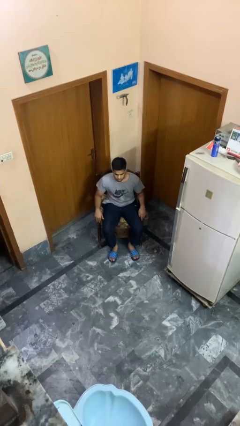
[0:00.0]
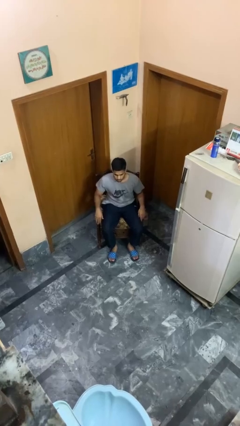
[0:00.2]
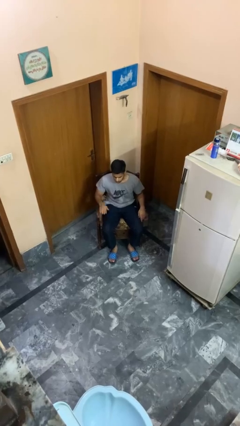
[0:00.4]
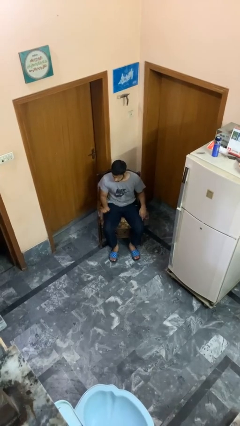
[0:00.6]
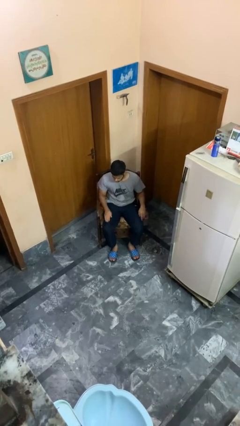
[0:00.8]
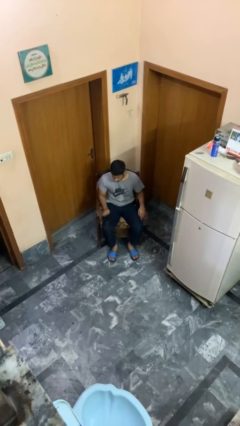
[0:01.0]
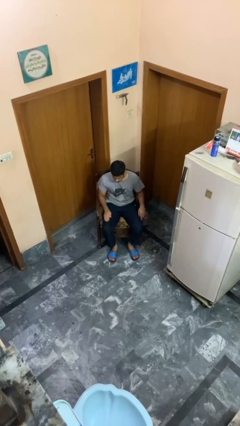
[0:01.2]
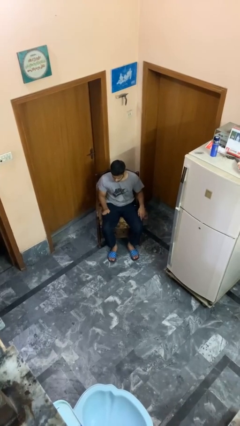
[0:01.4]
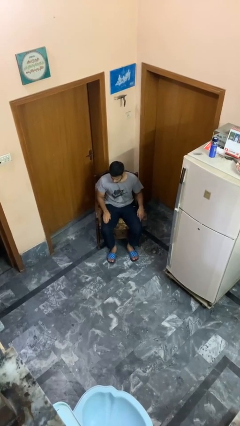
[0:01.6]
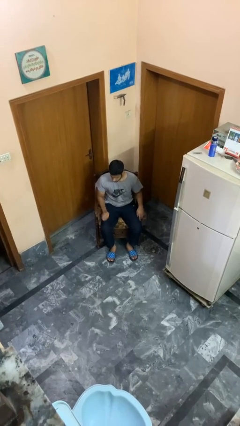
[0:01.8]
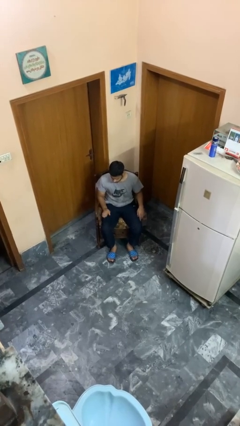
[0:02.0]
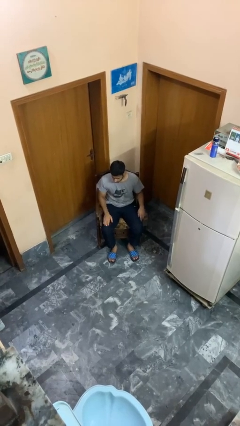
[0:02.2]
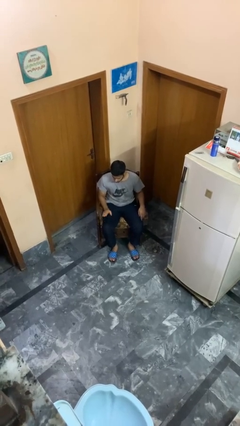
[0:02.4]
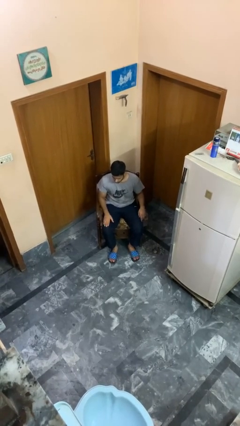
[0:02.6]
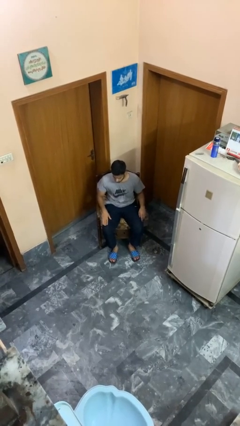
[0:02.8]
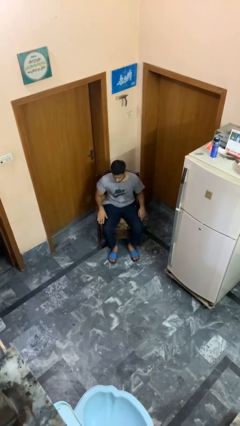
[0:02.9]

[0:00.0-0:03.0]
person slaps hands on thighs

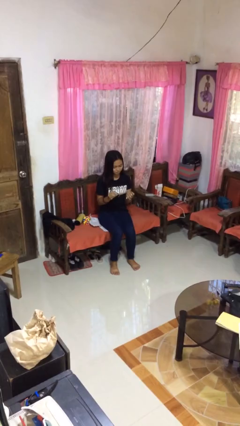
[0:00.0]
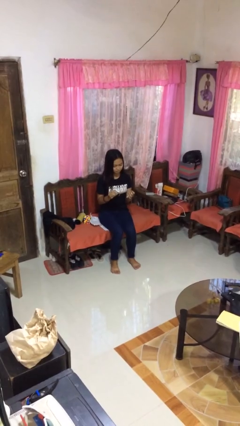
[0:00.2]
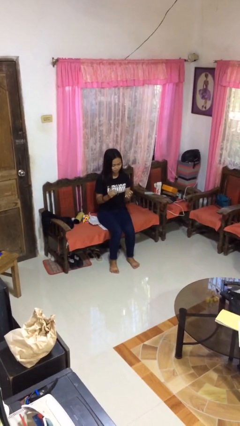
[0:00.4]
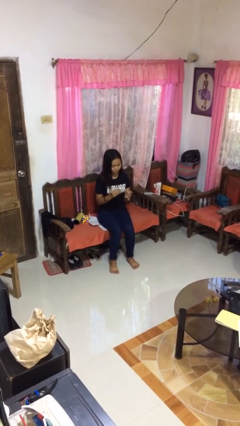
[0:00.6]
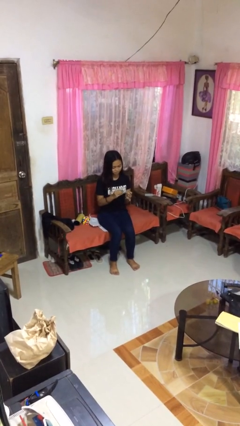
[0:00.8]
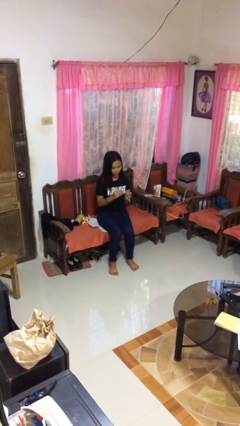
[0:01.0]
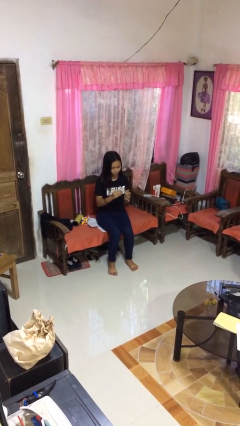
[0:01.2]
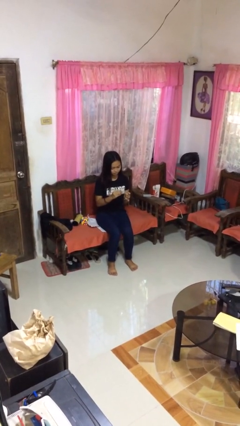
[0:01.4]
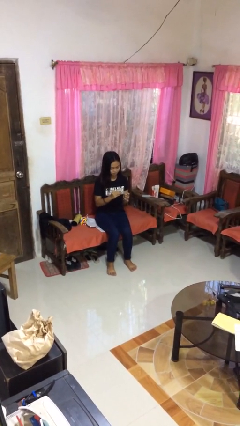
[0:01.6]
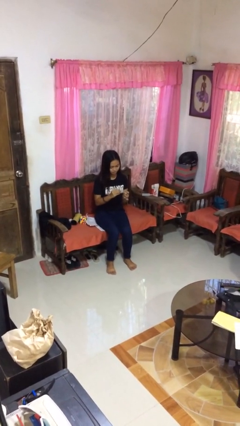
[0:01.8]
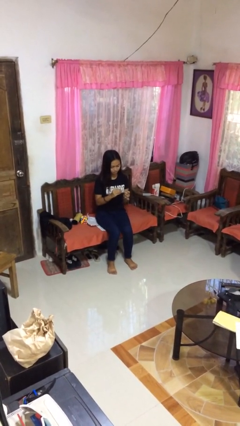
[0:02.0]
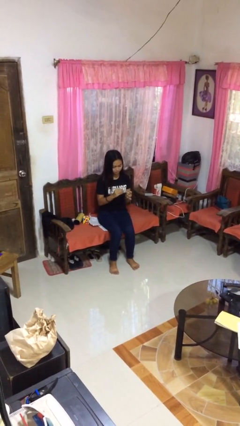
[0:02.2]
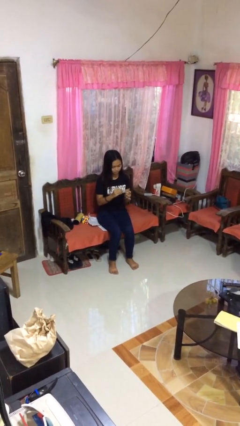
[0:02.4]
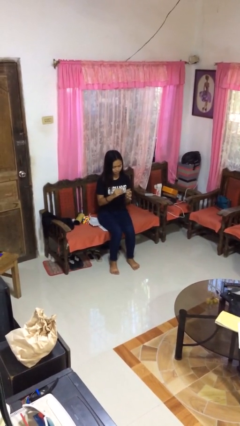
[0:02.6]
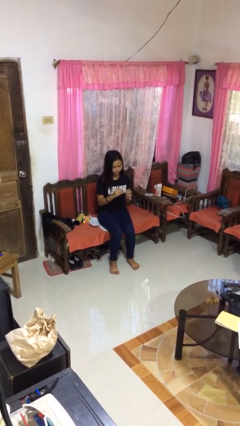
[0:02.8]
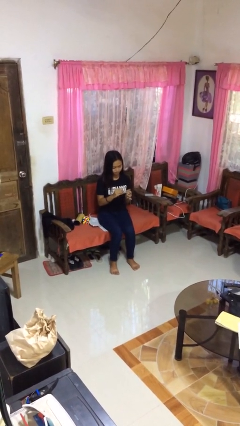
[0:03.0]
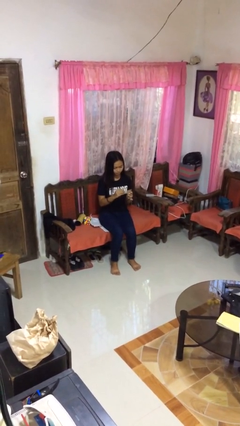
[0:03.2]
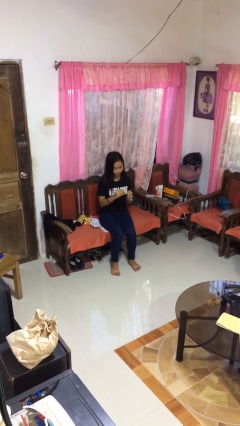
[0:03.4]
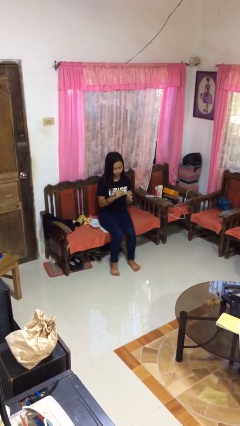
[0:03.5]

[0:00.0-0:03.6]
person clips fingernails

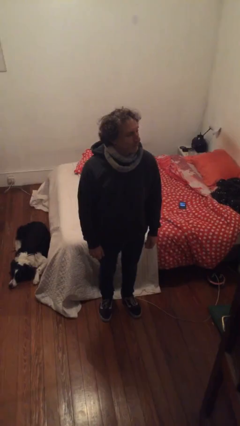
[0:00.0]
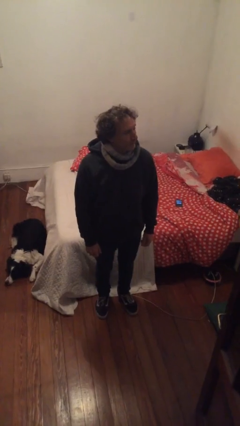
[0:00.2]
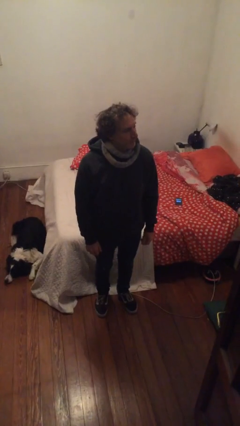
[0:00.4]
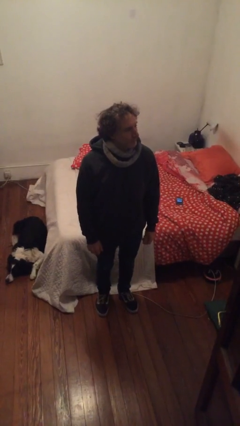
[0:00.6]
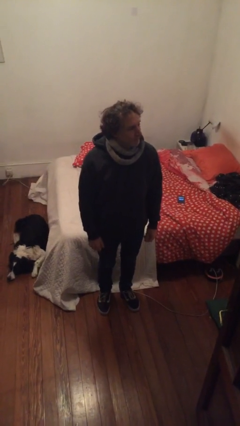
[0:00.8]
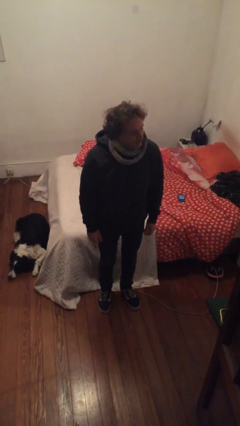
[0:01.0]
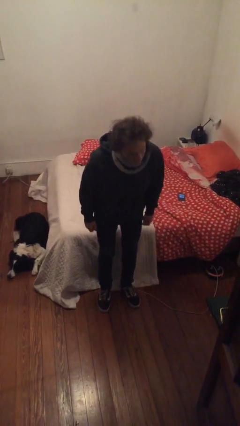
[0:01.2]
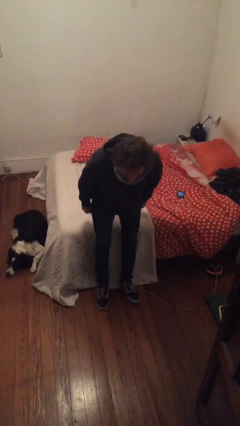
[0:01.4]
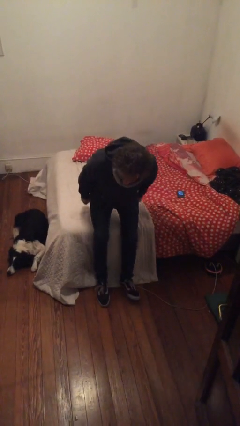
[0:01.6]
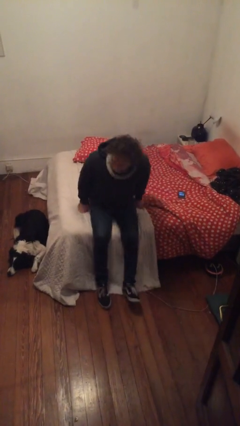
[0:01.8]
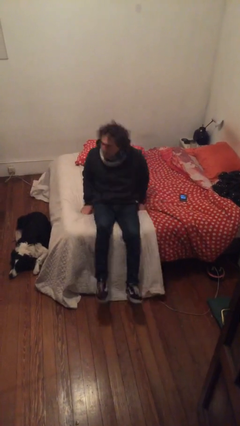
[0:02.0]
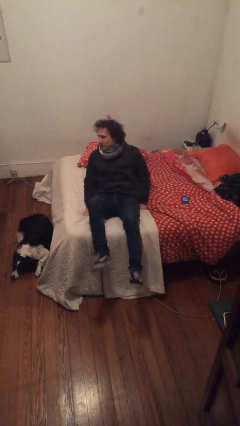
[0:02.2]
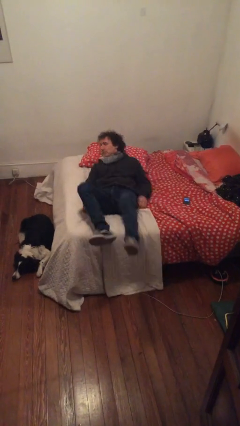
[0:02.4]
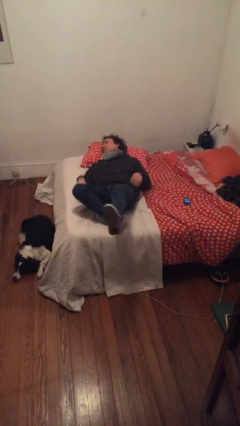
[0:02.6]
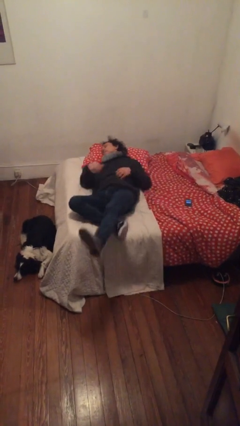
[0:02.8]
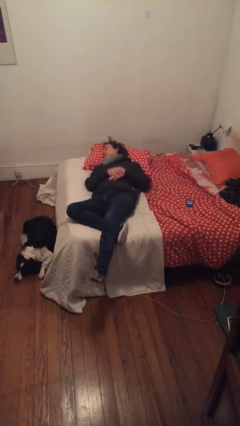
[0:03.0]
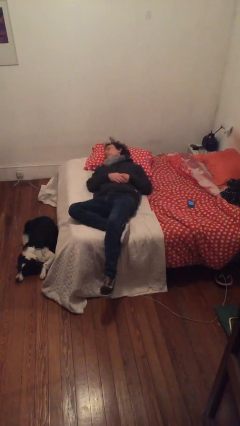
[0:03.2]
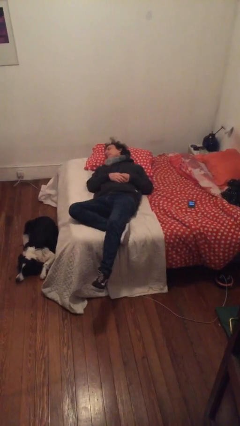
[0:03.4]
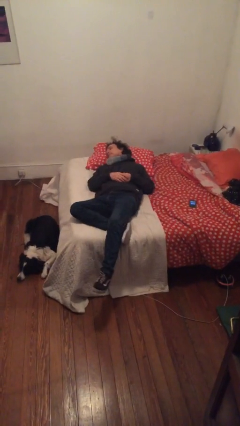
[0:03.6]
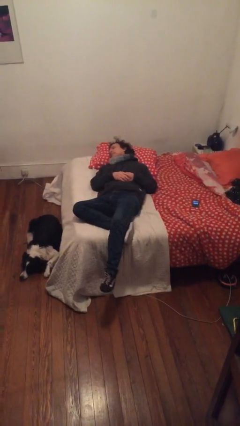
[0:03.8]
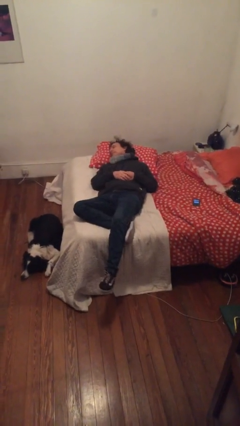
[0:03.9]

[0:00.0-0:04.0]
person lies down on bed

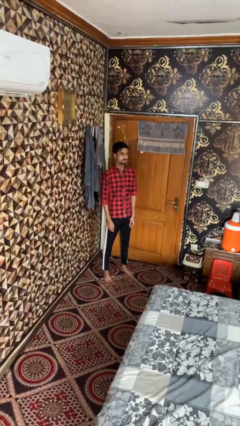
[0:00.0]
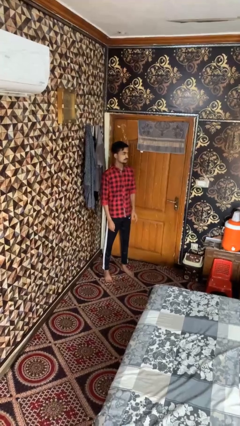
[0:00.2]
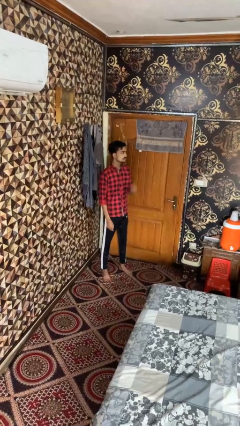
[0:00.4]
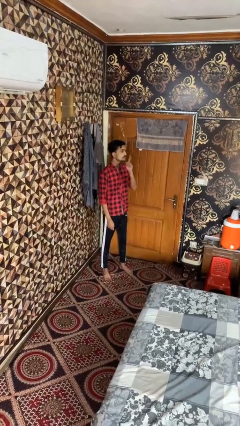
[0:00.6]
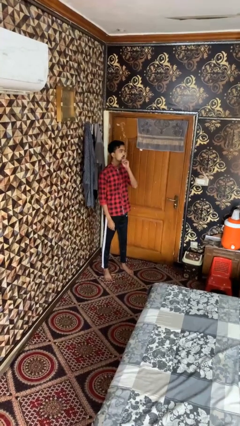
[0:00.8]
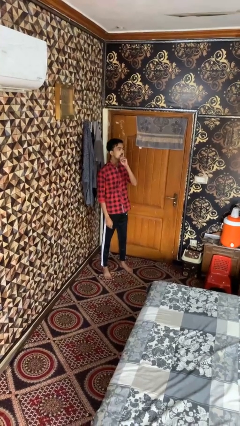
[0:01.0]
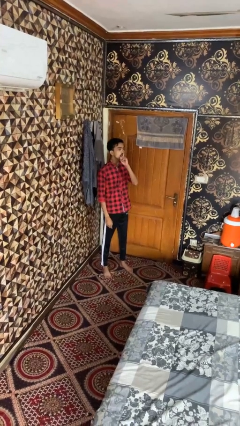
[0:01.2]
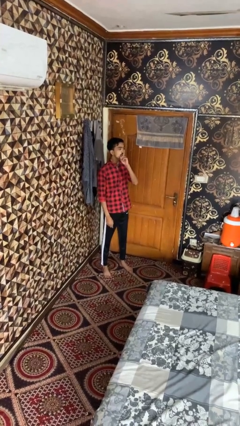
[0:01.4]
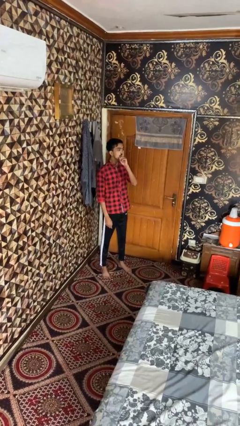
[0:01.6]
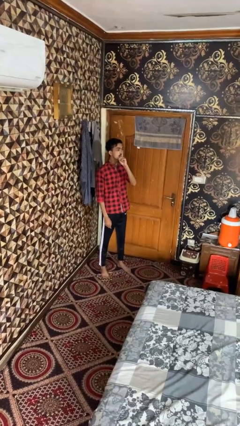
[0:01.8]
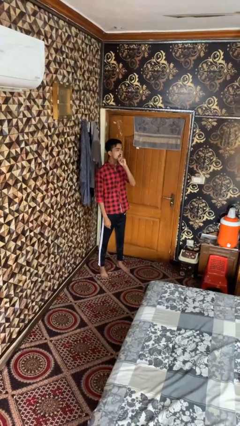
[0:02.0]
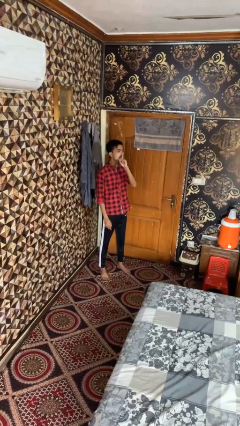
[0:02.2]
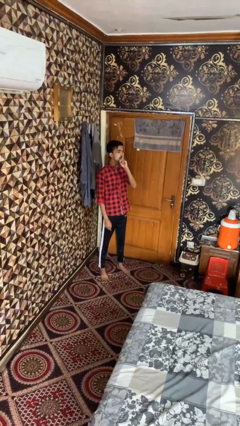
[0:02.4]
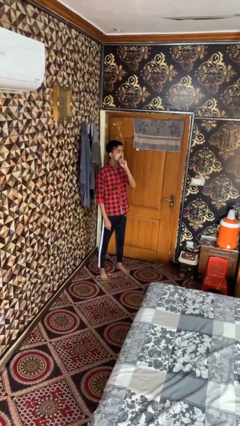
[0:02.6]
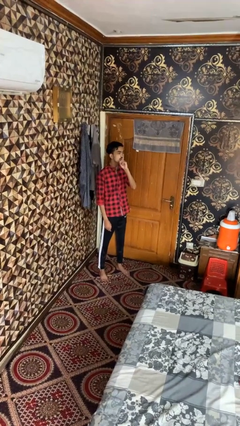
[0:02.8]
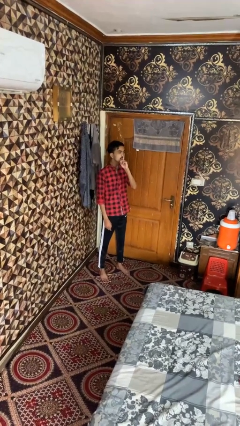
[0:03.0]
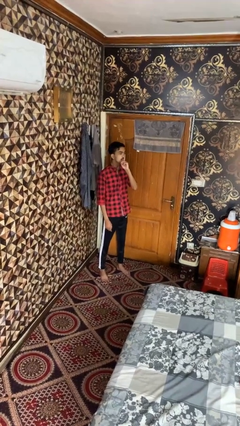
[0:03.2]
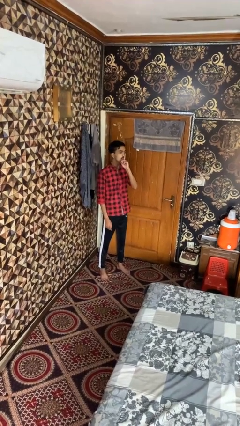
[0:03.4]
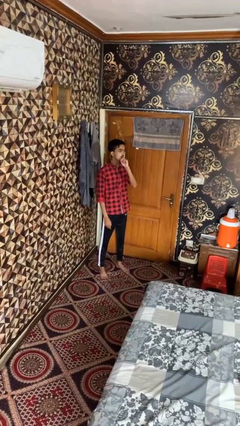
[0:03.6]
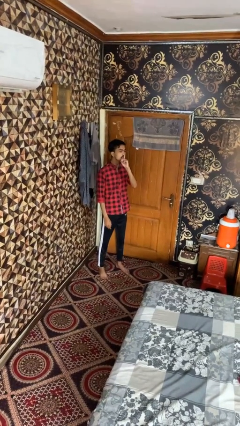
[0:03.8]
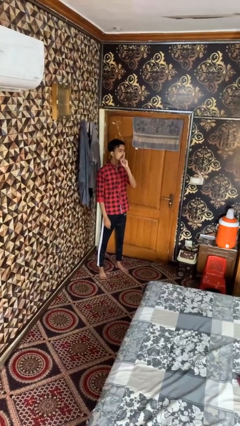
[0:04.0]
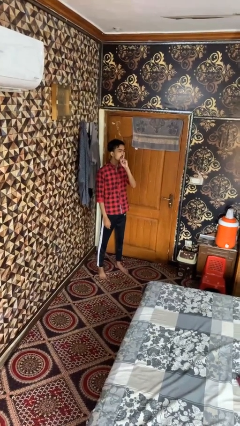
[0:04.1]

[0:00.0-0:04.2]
person gestures be quiet

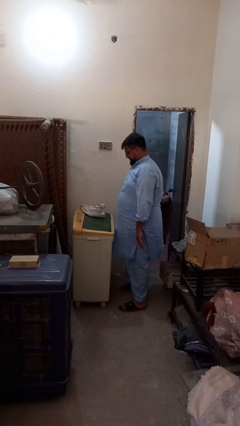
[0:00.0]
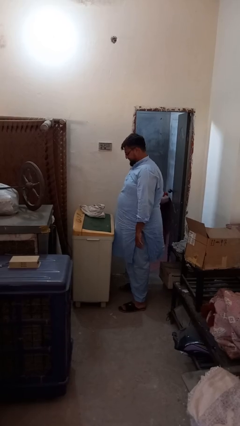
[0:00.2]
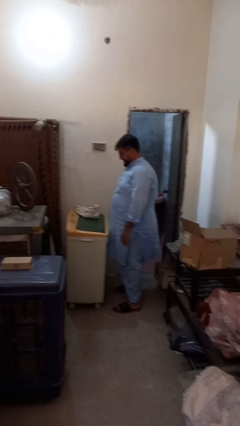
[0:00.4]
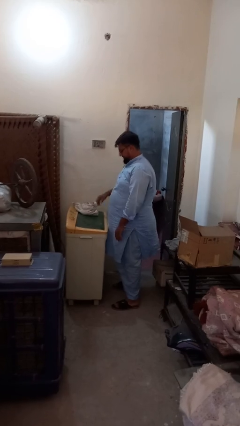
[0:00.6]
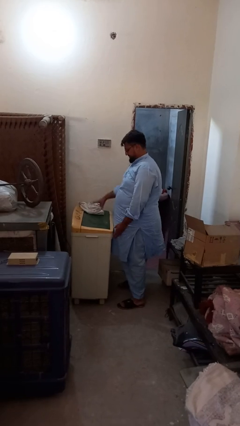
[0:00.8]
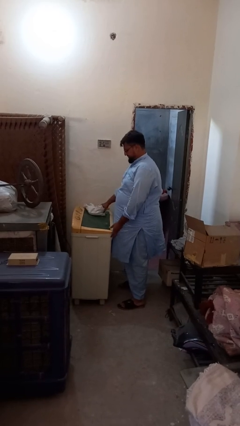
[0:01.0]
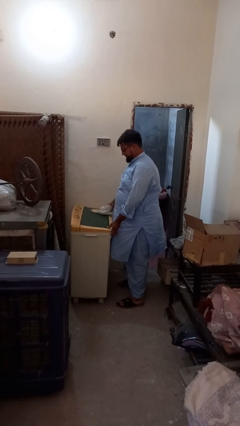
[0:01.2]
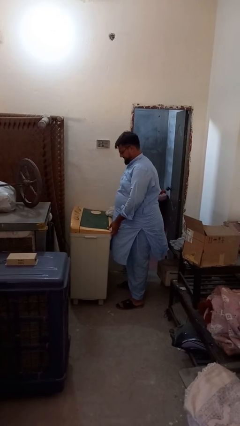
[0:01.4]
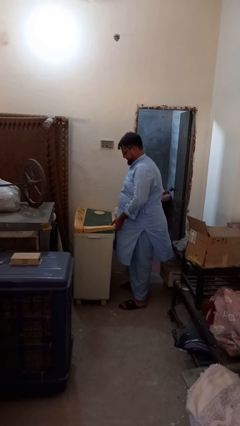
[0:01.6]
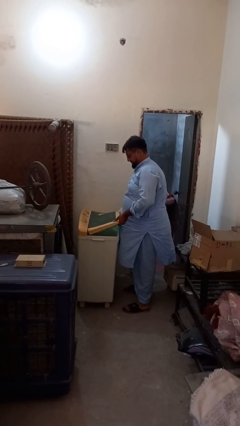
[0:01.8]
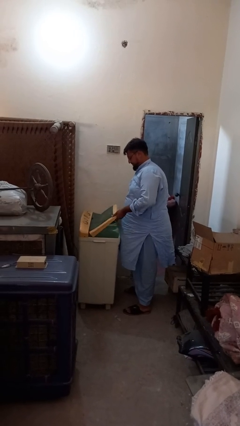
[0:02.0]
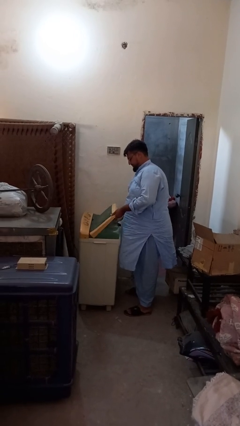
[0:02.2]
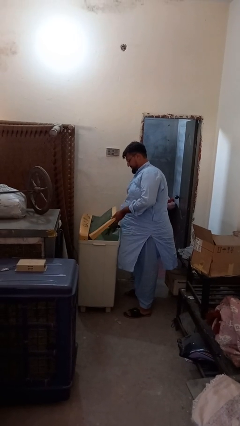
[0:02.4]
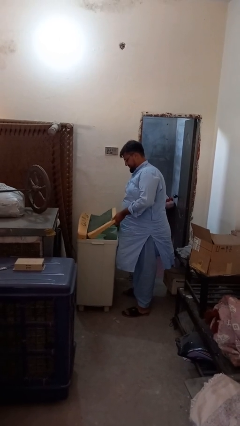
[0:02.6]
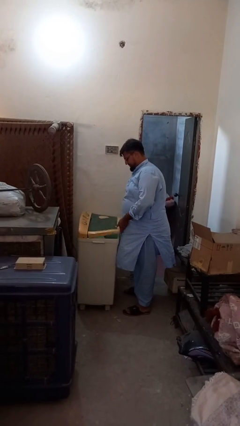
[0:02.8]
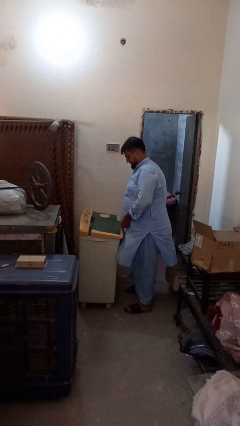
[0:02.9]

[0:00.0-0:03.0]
person loads clotheswasher
